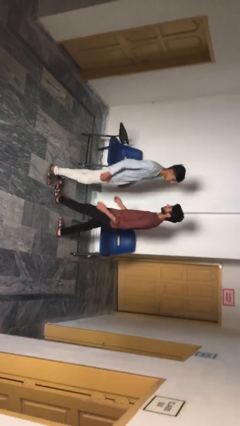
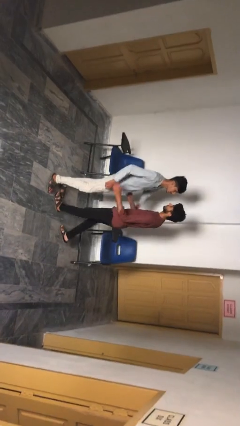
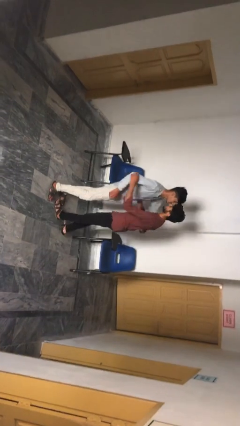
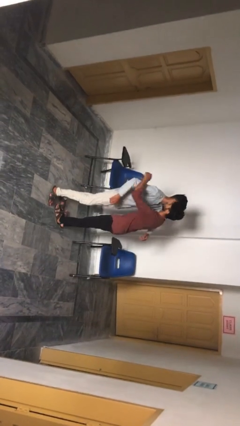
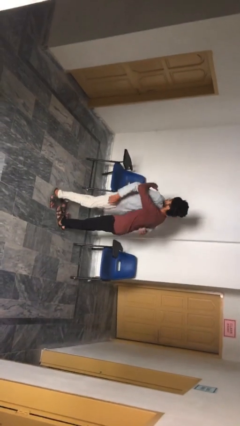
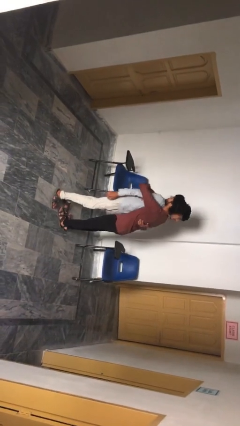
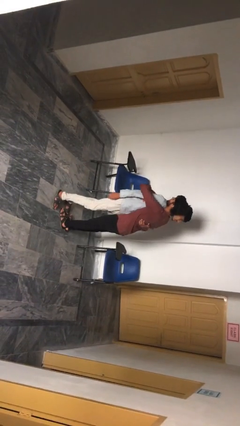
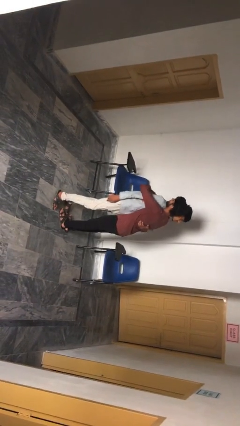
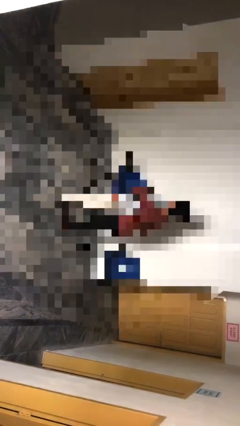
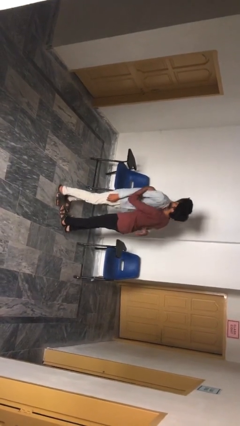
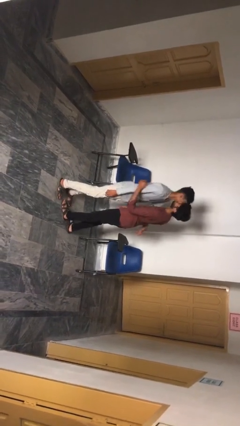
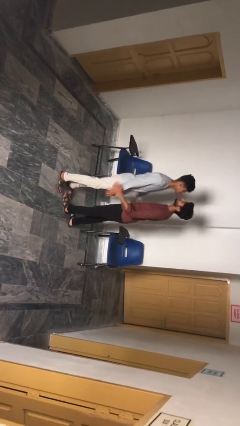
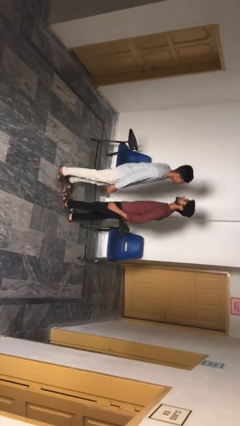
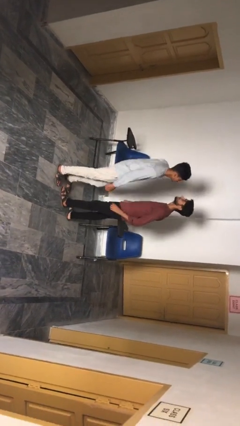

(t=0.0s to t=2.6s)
person embraces person

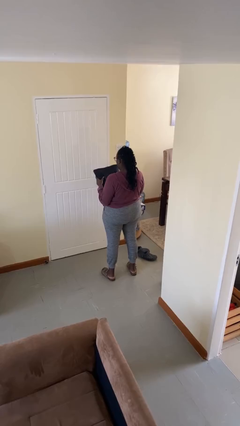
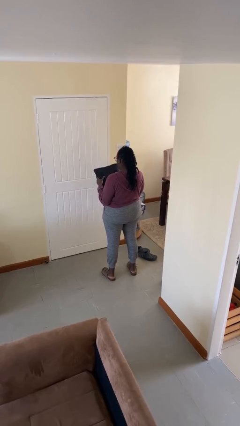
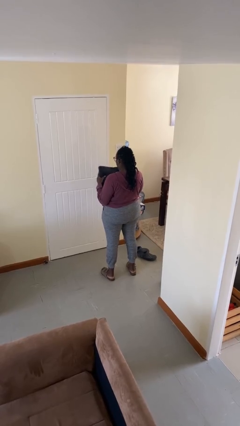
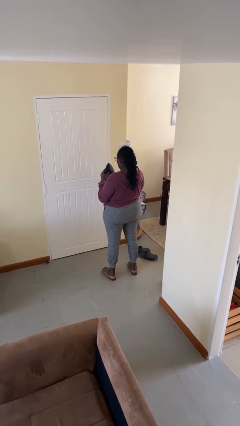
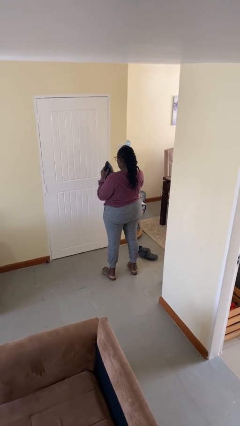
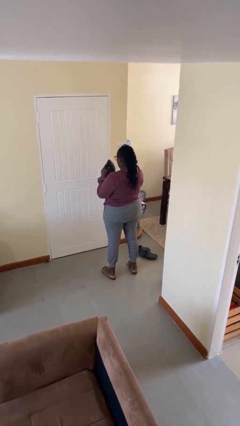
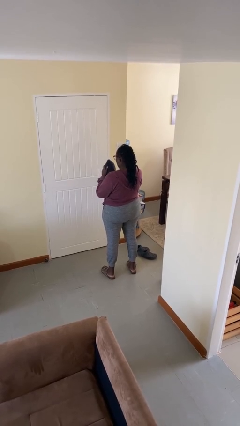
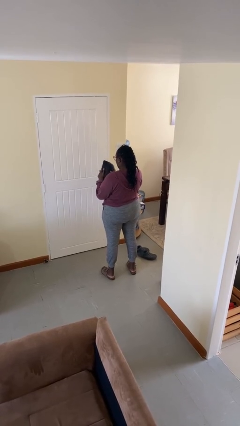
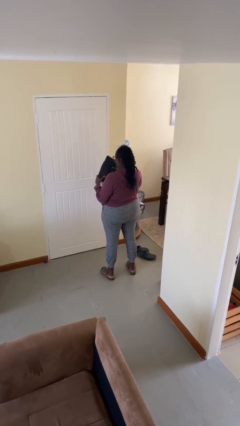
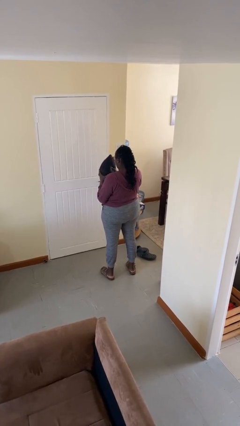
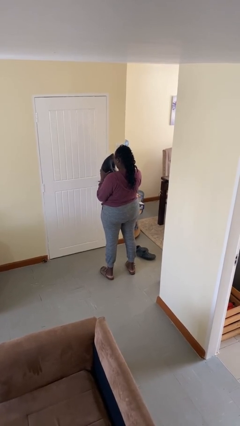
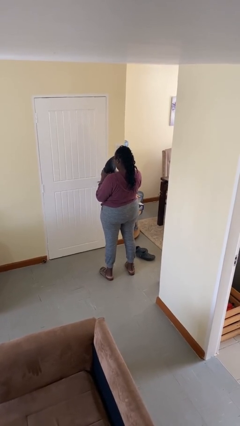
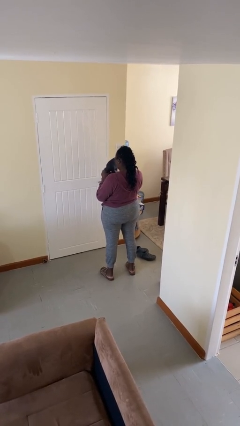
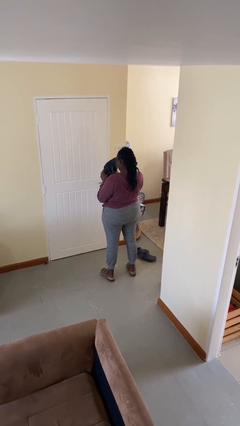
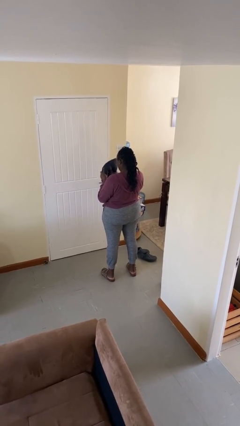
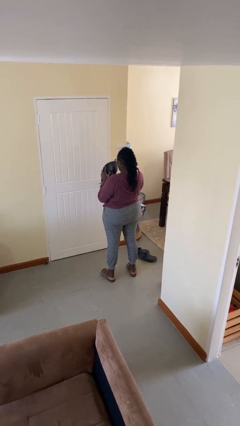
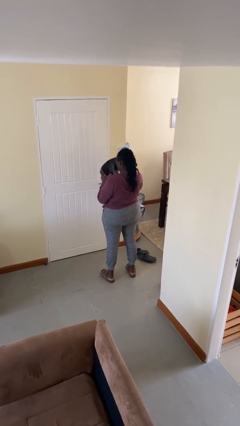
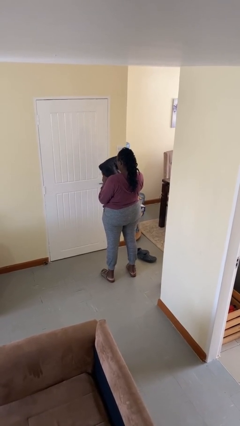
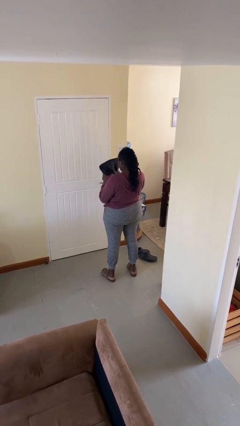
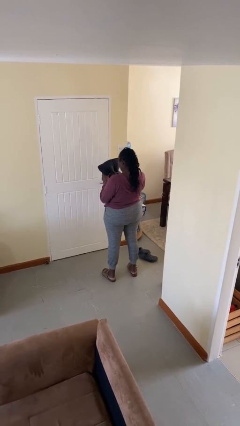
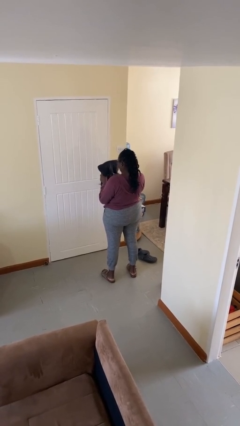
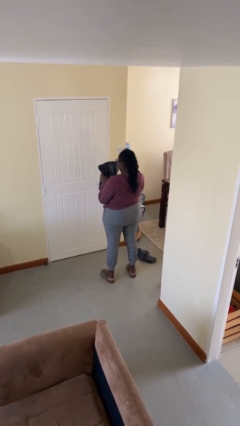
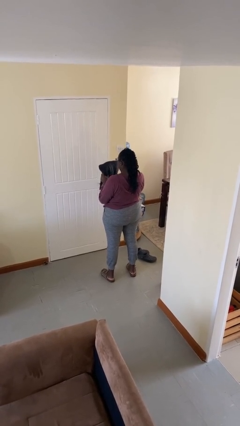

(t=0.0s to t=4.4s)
person squeezes object

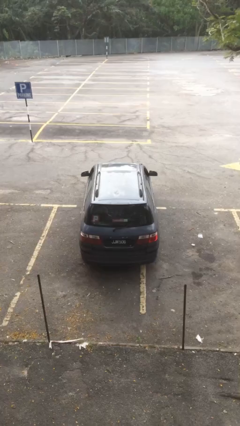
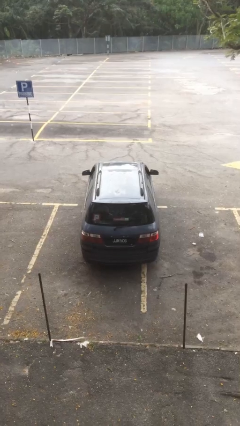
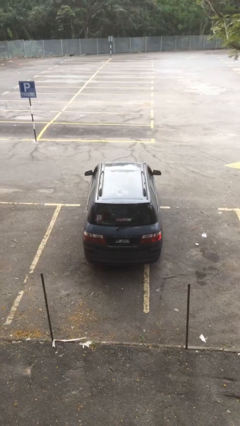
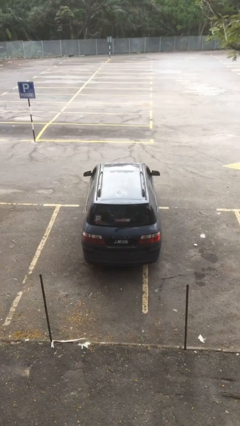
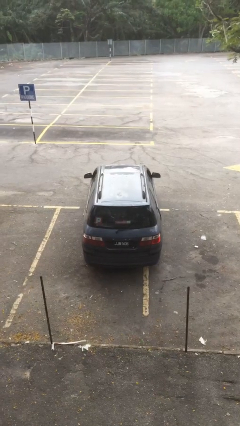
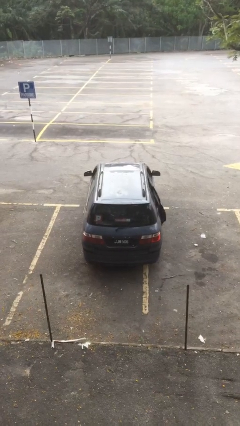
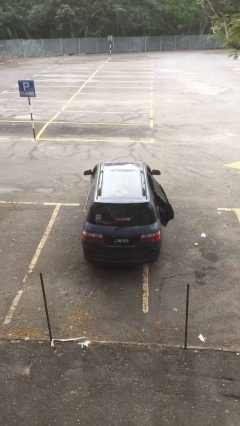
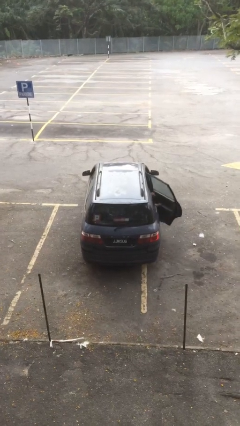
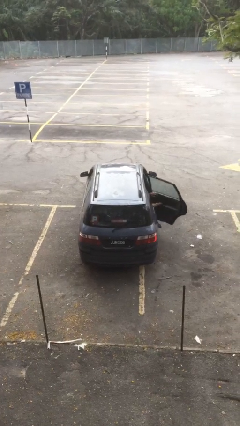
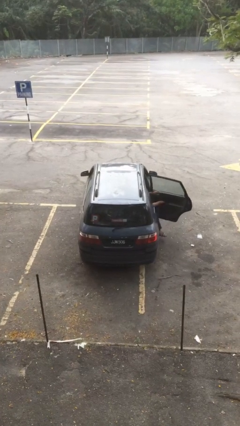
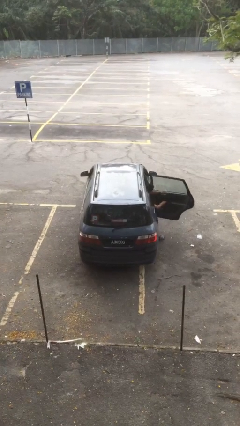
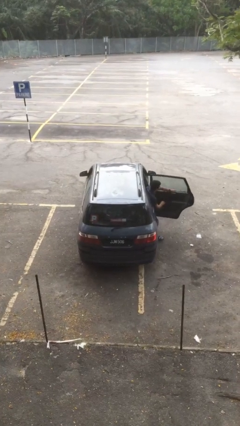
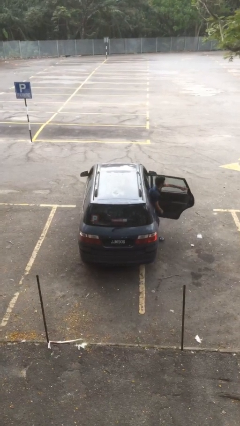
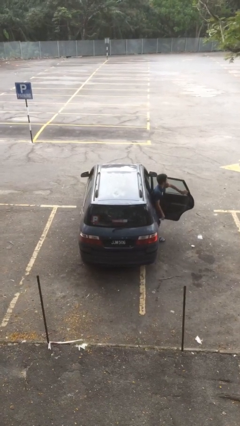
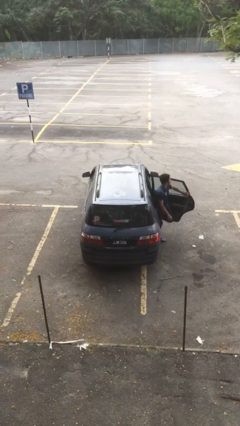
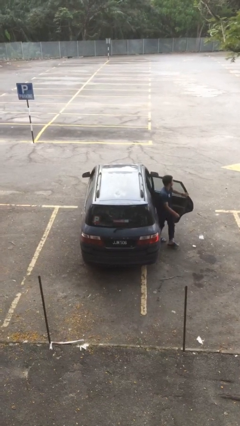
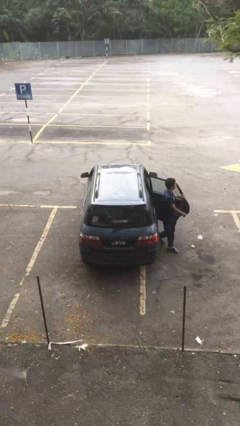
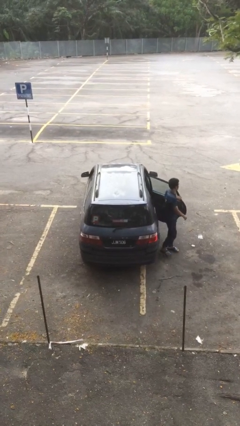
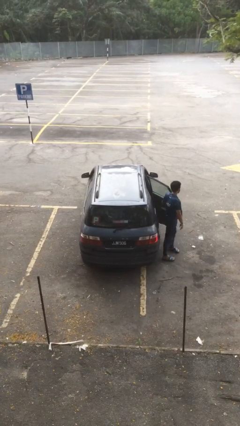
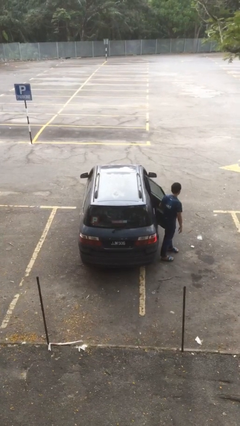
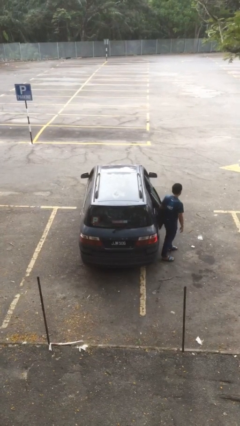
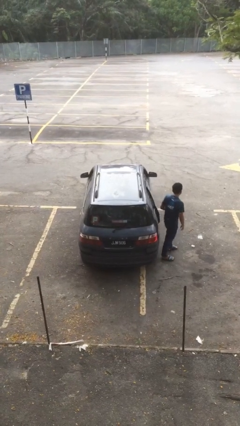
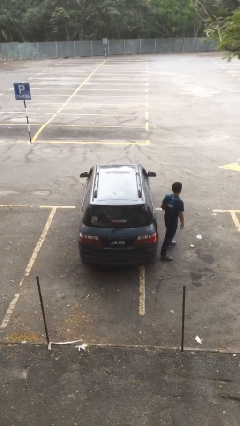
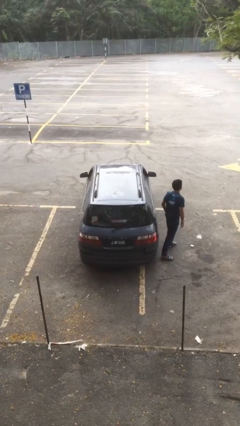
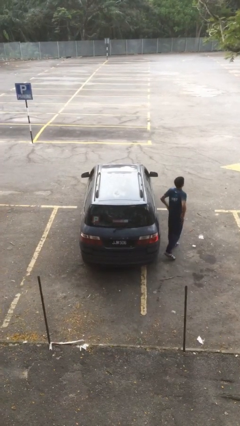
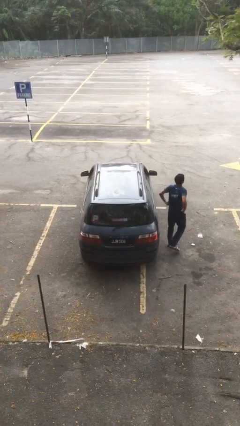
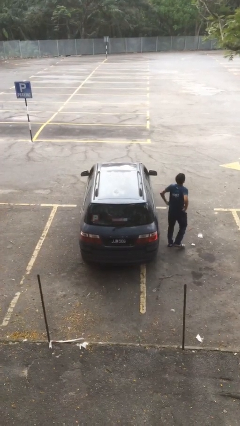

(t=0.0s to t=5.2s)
car drops off person

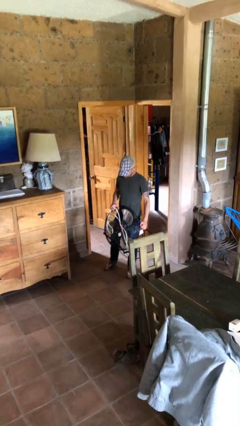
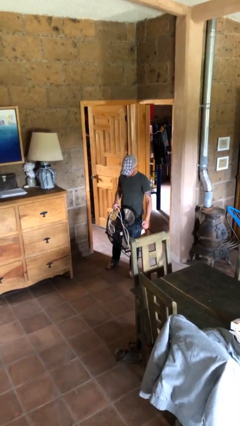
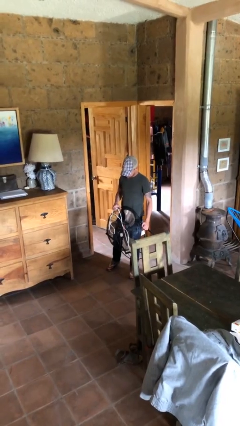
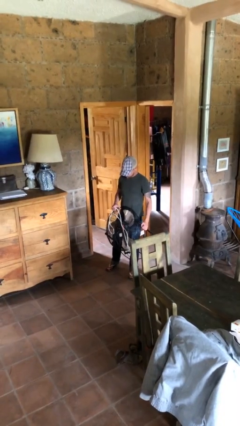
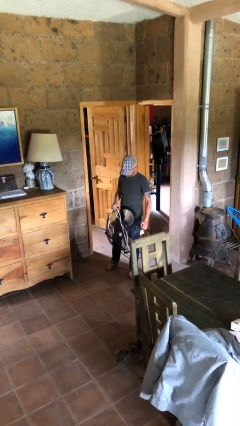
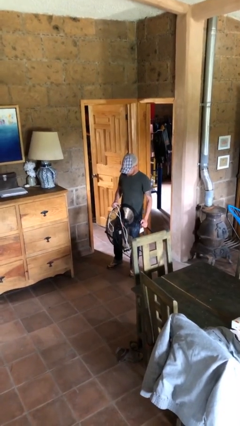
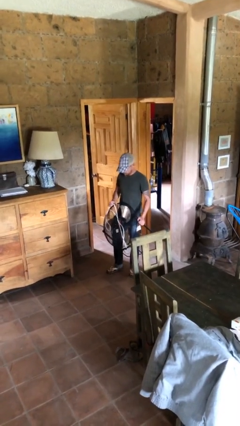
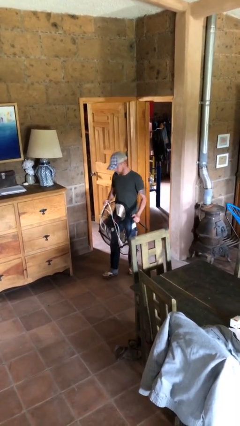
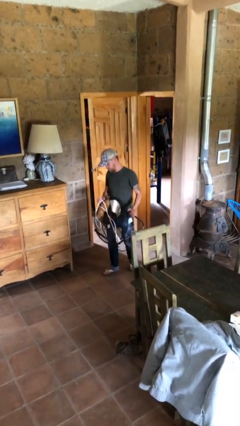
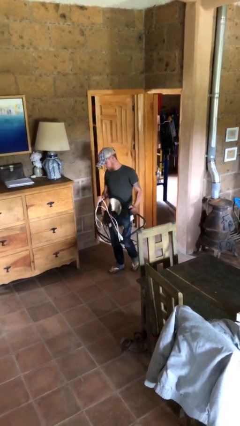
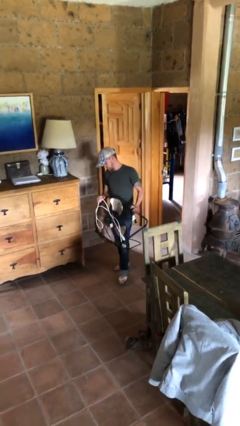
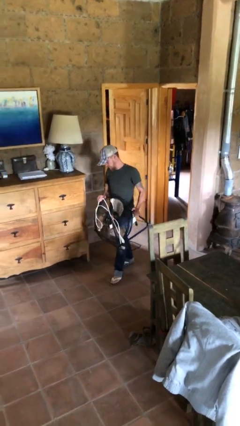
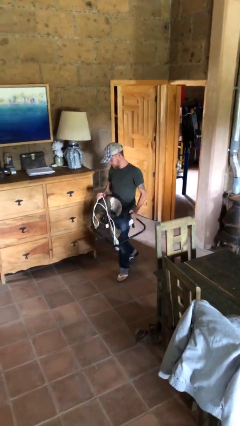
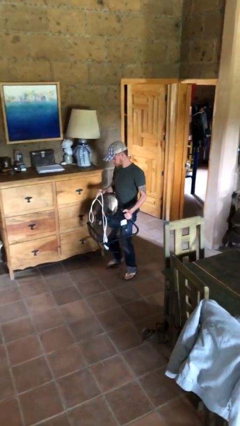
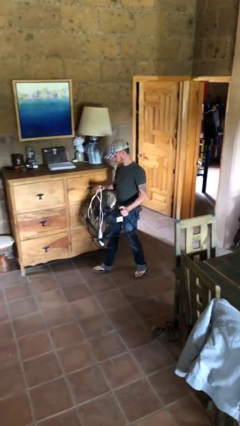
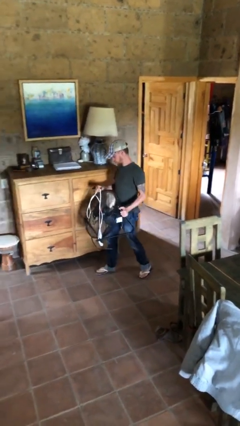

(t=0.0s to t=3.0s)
person carries heavy object

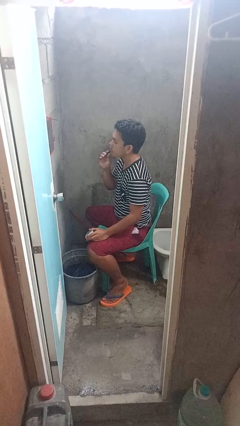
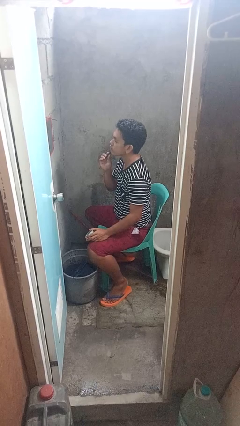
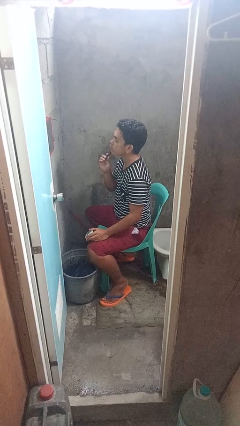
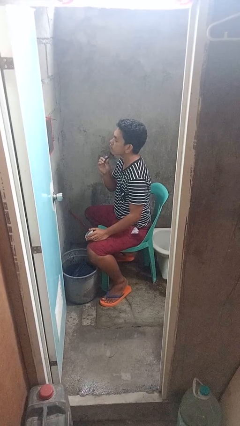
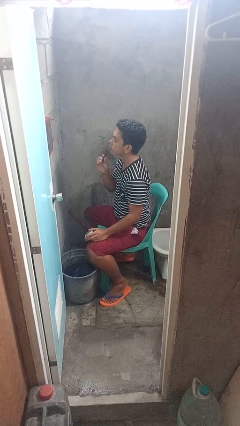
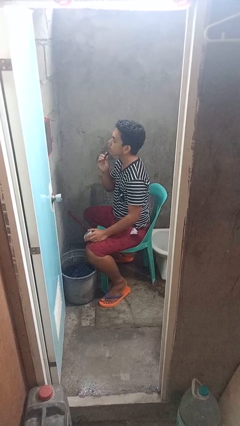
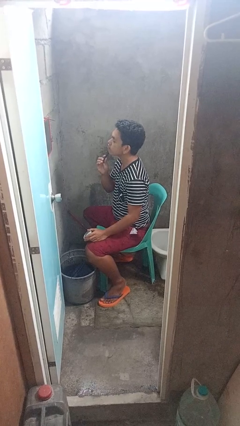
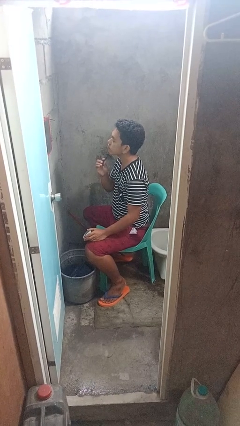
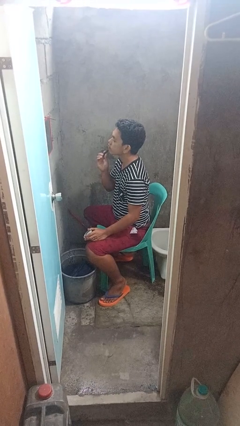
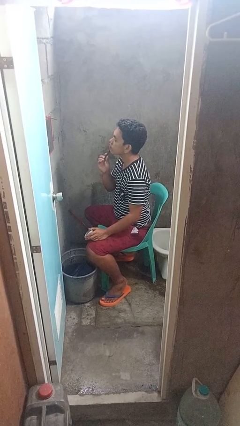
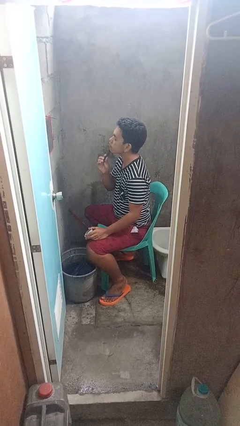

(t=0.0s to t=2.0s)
person shaves face

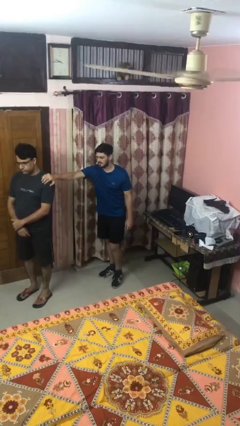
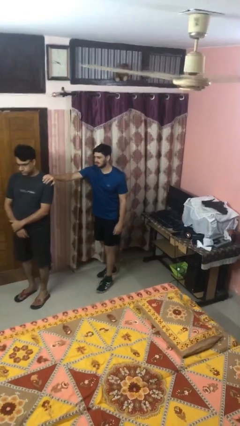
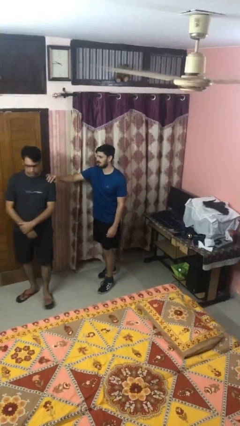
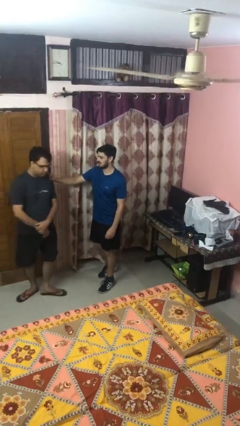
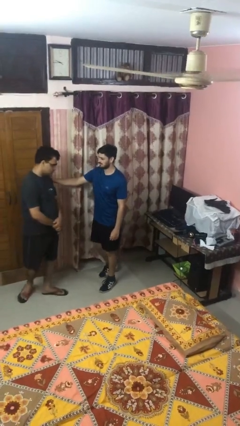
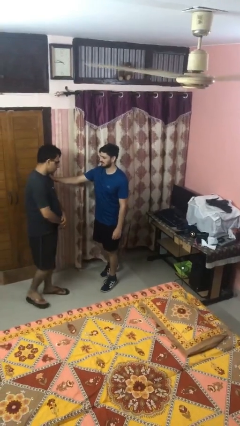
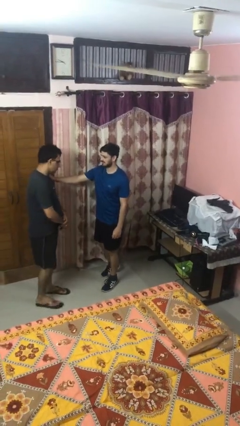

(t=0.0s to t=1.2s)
person spins person around
